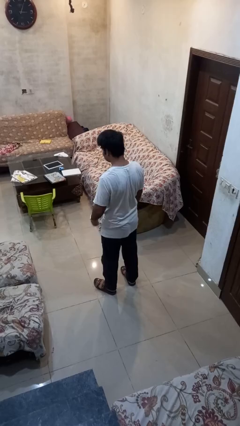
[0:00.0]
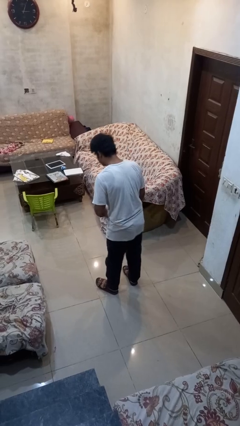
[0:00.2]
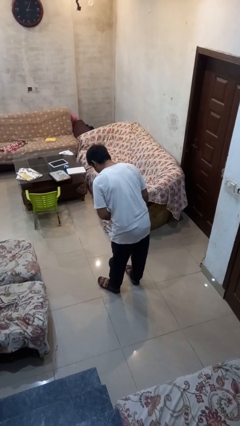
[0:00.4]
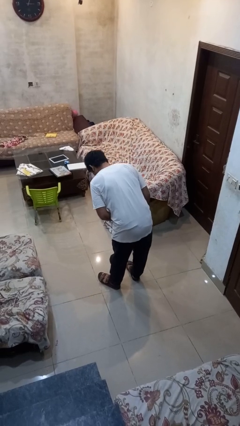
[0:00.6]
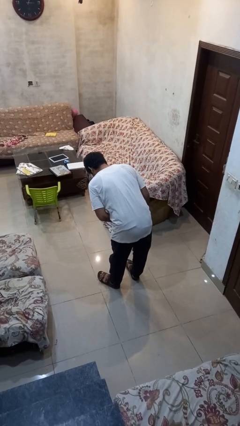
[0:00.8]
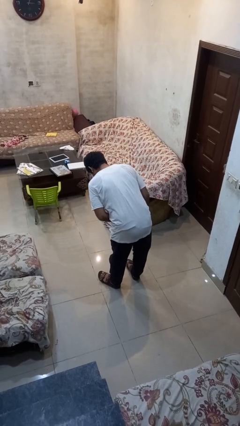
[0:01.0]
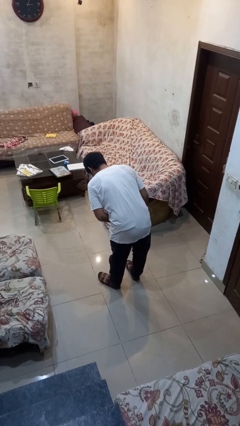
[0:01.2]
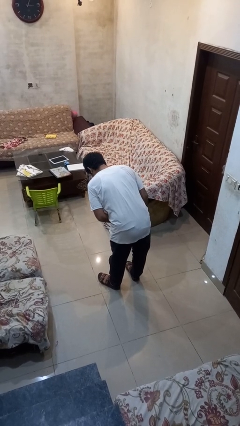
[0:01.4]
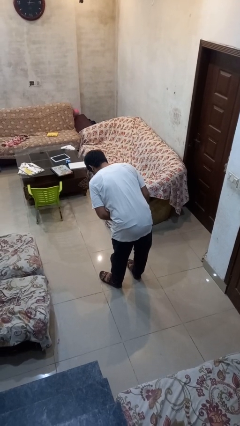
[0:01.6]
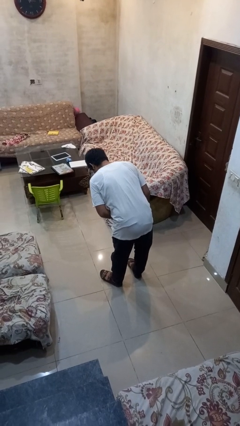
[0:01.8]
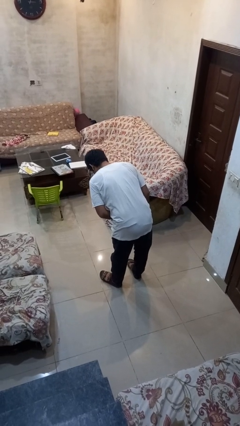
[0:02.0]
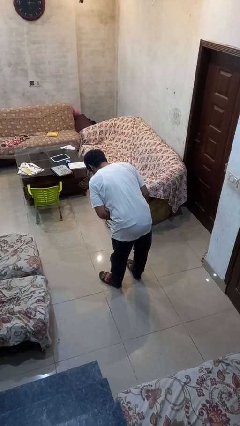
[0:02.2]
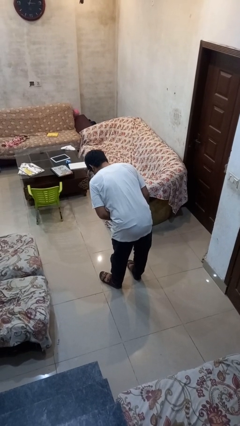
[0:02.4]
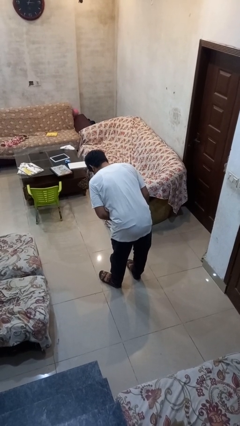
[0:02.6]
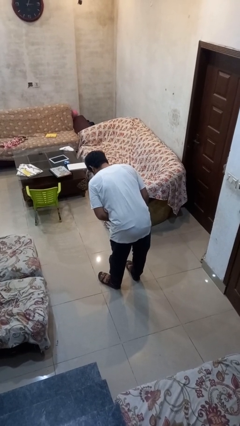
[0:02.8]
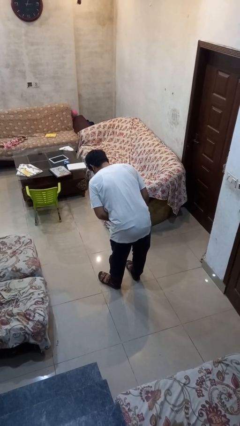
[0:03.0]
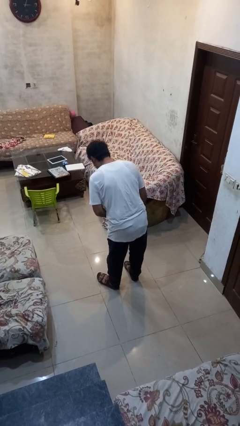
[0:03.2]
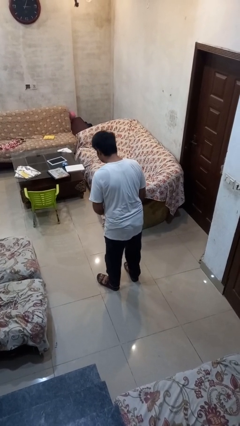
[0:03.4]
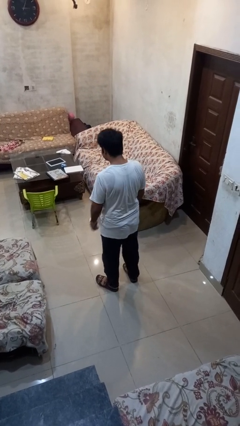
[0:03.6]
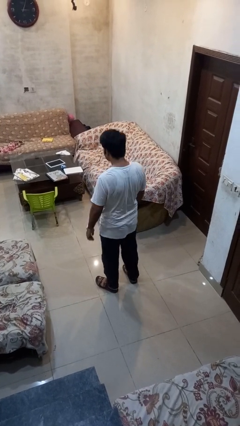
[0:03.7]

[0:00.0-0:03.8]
person bows

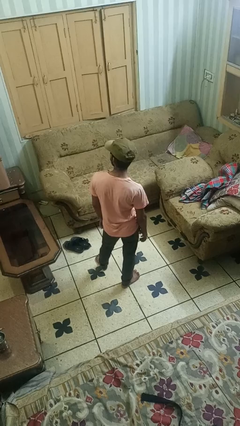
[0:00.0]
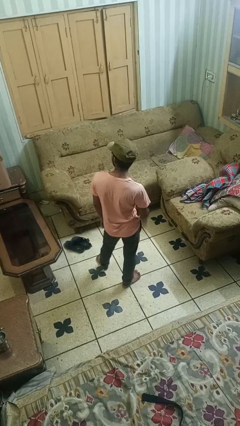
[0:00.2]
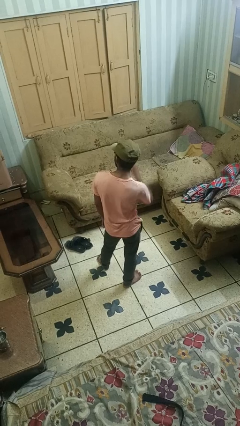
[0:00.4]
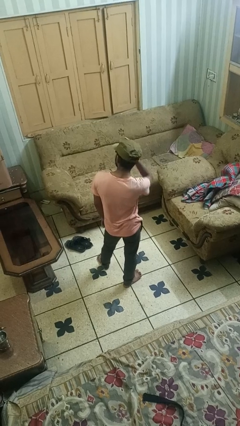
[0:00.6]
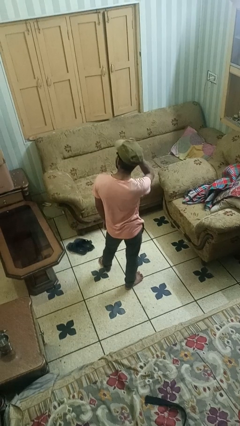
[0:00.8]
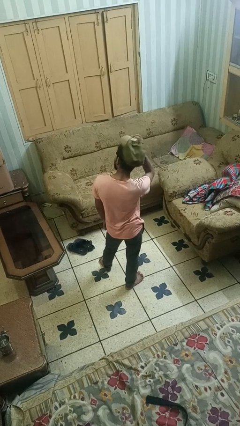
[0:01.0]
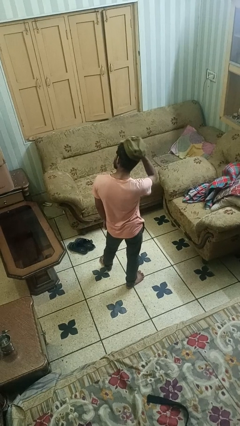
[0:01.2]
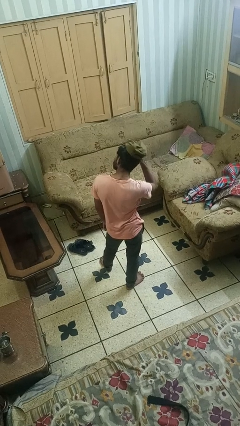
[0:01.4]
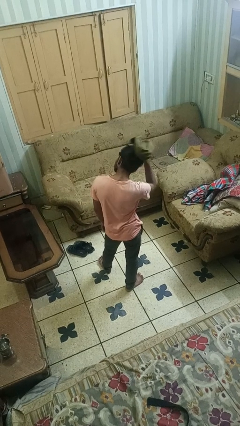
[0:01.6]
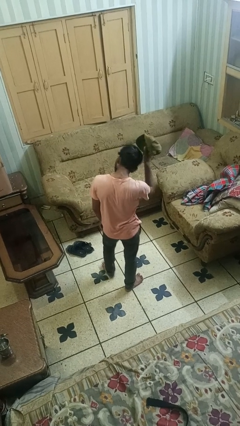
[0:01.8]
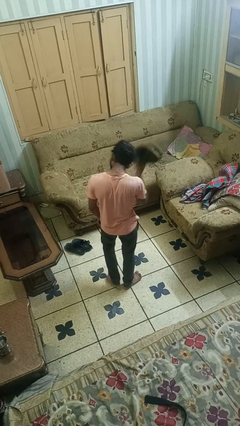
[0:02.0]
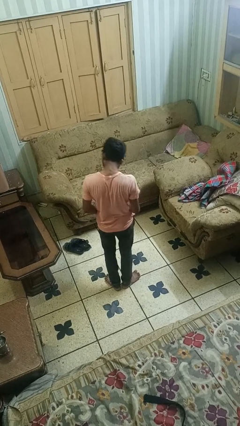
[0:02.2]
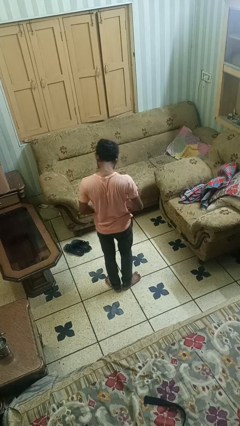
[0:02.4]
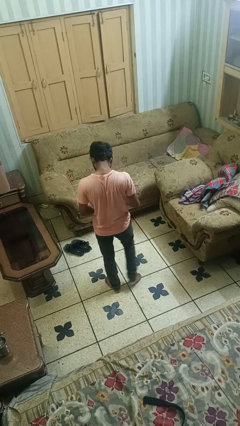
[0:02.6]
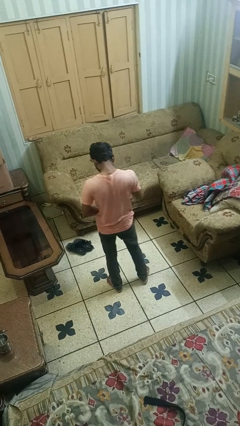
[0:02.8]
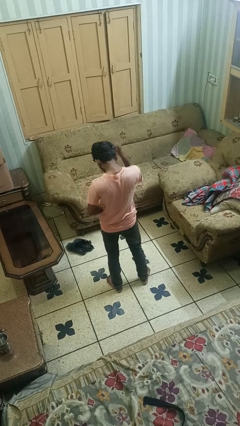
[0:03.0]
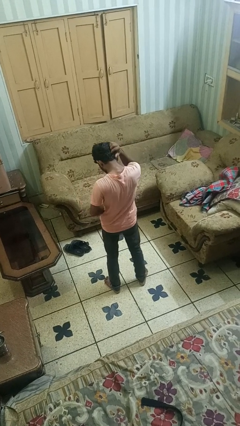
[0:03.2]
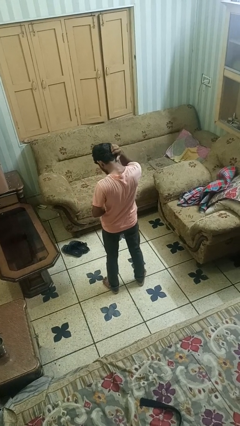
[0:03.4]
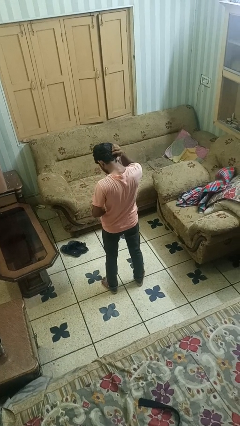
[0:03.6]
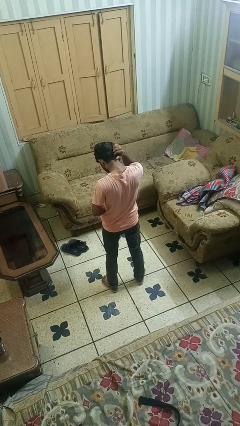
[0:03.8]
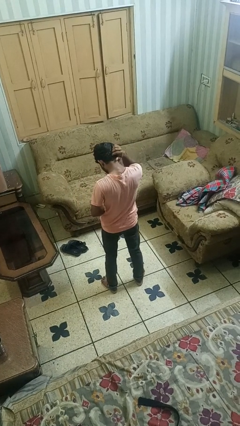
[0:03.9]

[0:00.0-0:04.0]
person takes off hat

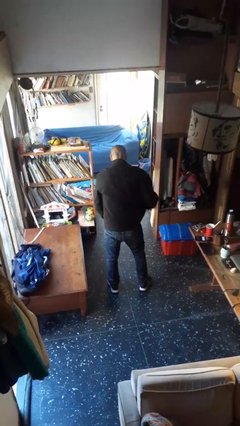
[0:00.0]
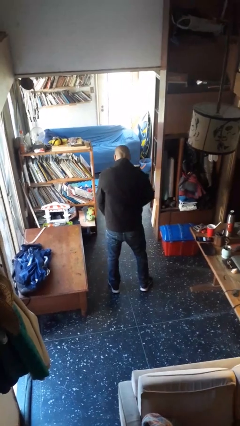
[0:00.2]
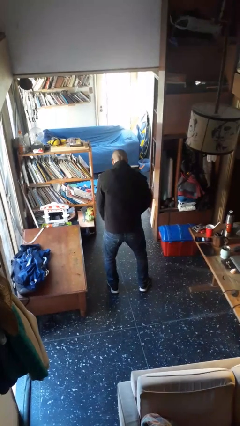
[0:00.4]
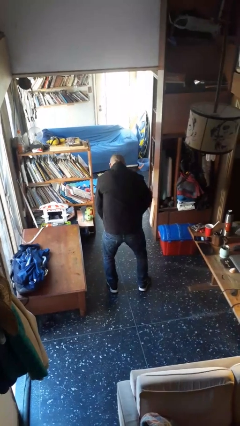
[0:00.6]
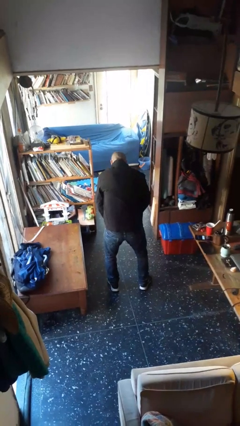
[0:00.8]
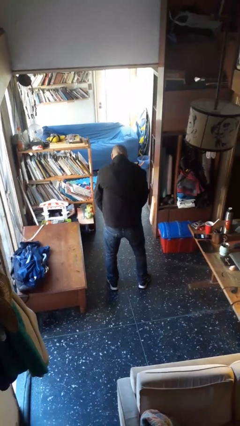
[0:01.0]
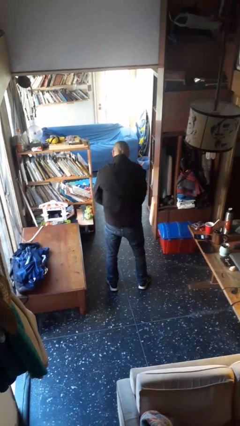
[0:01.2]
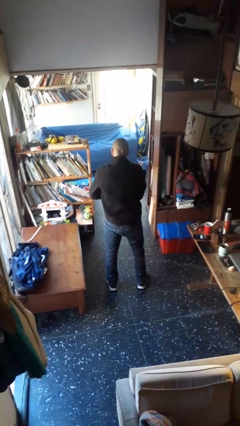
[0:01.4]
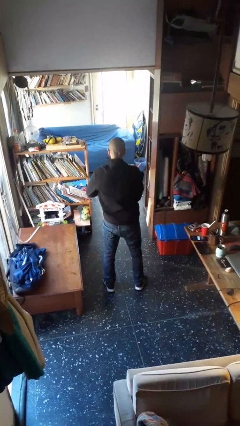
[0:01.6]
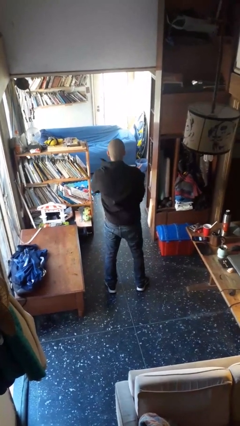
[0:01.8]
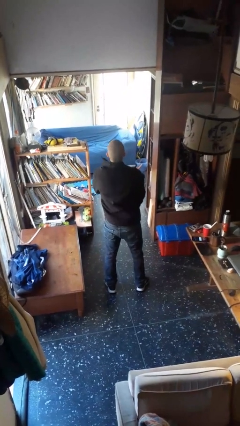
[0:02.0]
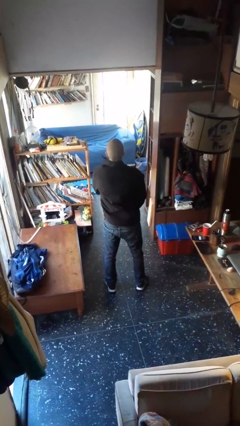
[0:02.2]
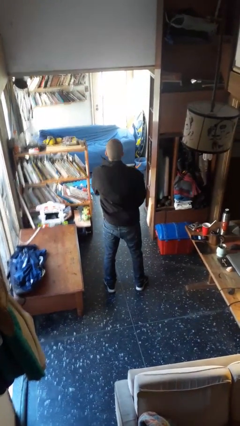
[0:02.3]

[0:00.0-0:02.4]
person zips up jacket

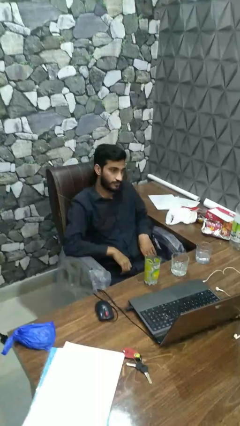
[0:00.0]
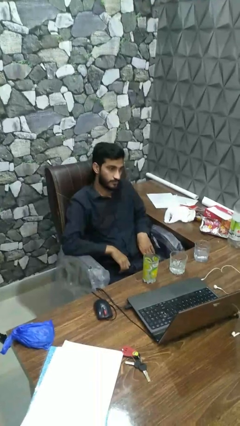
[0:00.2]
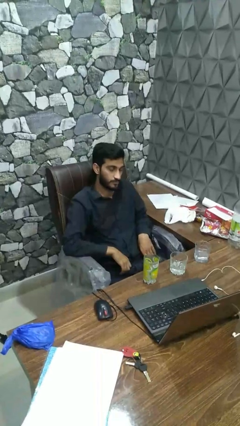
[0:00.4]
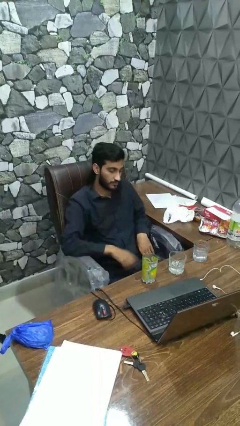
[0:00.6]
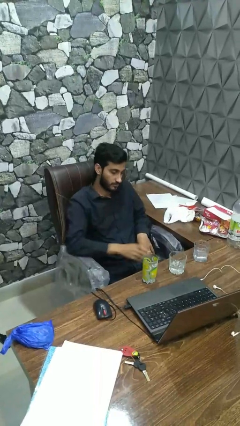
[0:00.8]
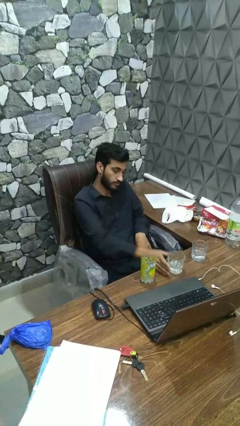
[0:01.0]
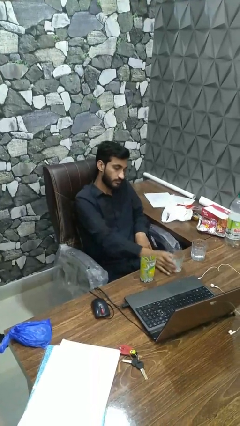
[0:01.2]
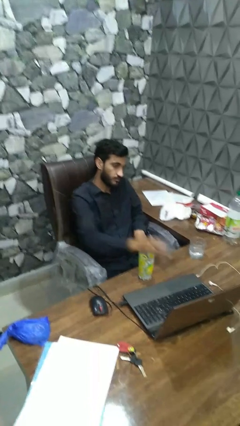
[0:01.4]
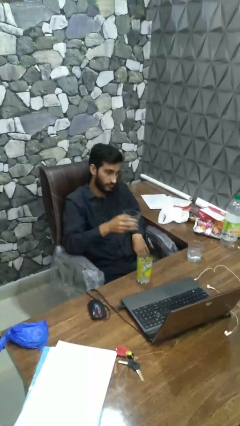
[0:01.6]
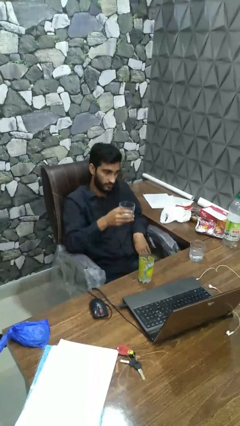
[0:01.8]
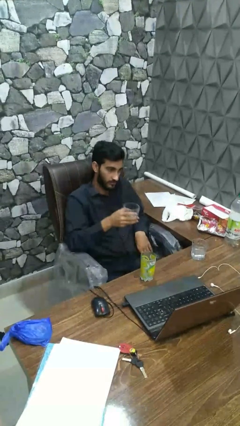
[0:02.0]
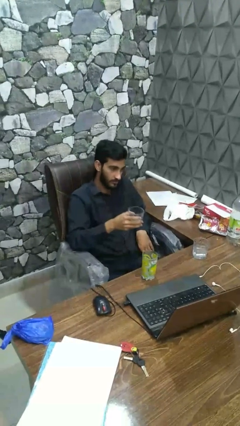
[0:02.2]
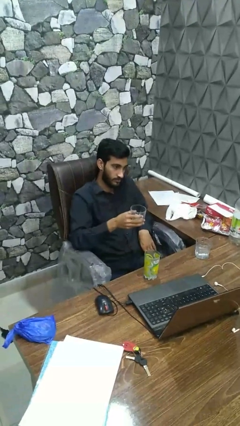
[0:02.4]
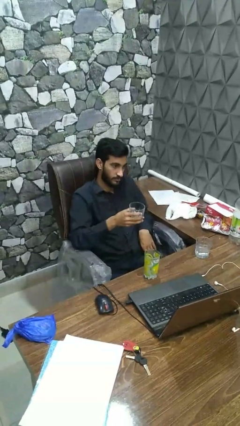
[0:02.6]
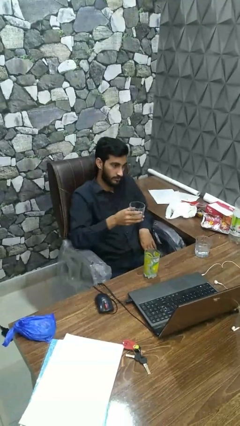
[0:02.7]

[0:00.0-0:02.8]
person picks up object from table

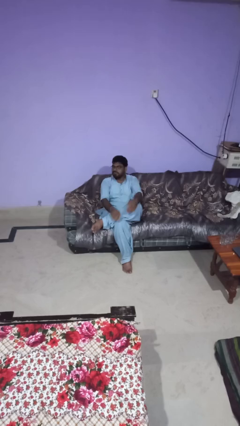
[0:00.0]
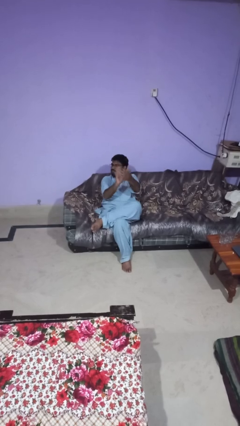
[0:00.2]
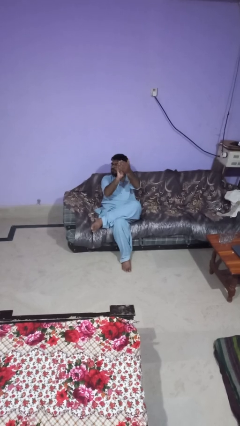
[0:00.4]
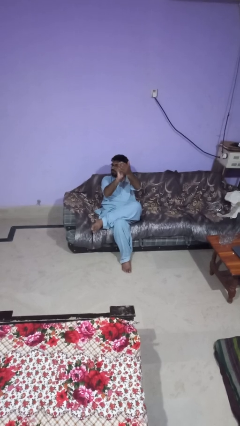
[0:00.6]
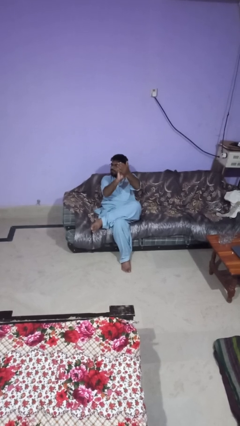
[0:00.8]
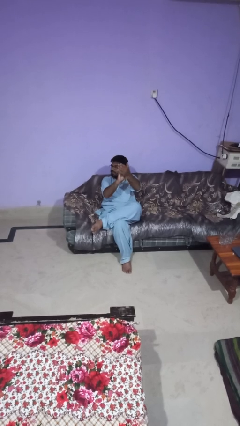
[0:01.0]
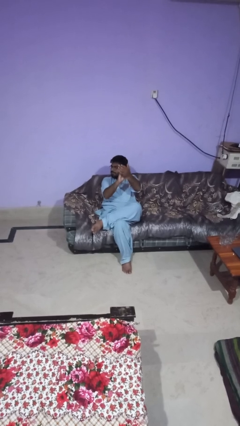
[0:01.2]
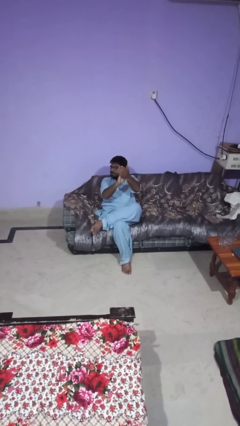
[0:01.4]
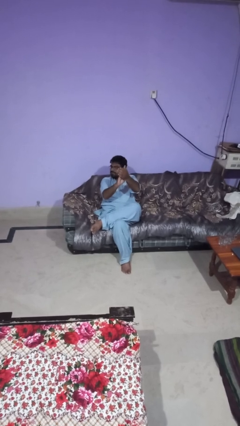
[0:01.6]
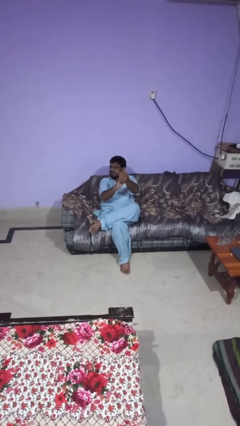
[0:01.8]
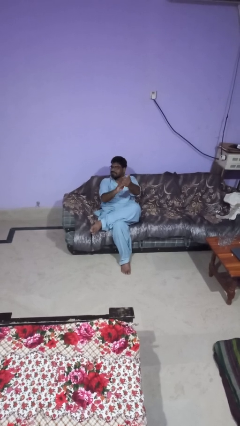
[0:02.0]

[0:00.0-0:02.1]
person claps hands

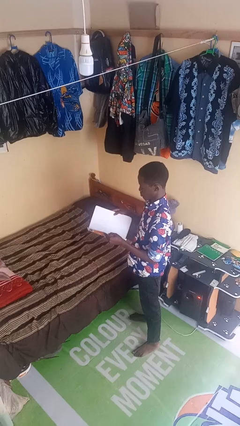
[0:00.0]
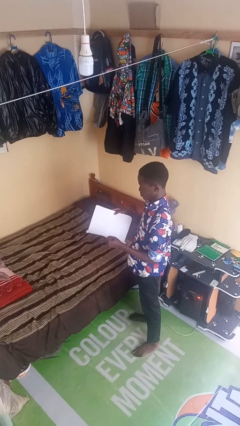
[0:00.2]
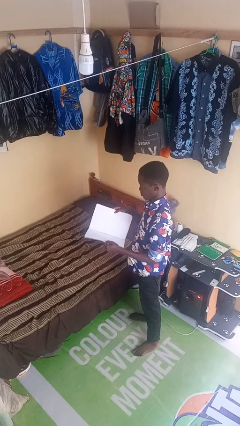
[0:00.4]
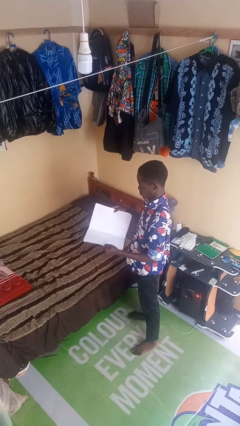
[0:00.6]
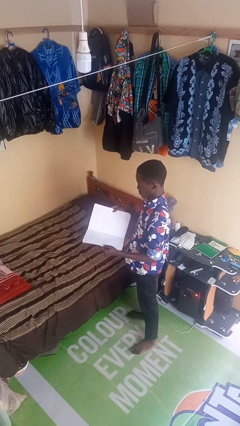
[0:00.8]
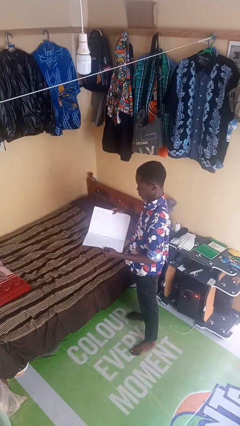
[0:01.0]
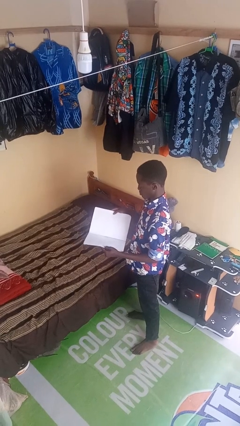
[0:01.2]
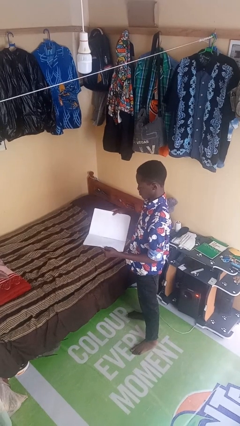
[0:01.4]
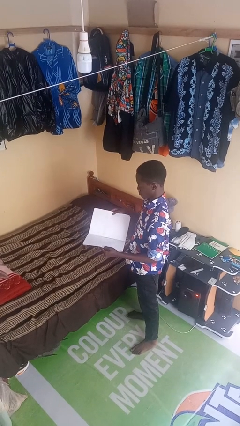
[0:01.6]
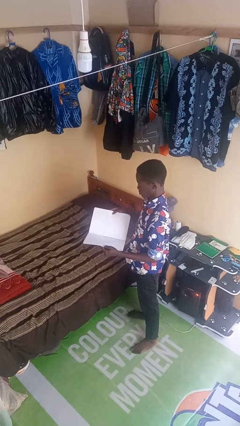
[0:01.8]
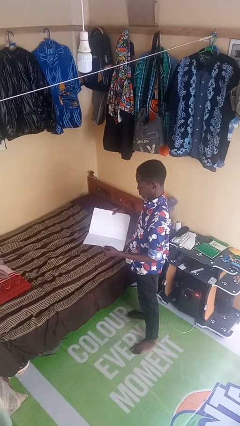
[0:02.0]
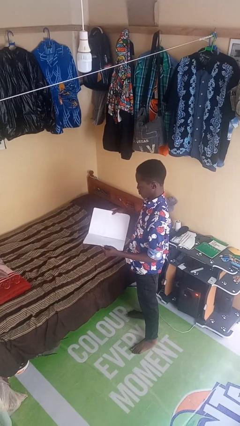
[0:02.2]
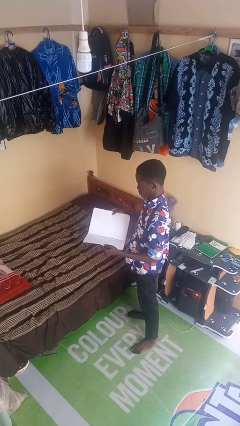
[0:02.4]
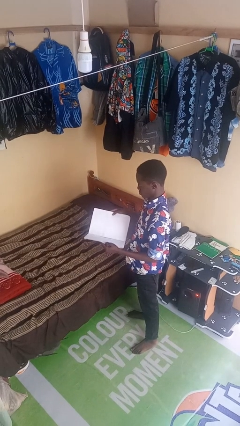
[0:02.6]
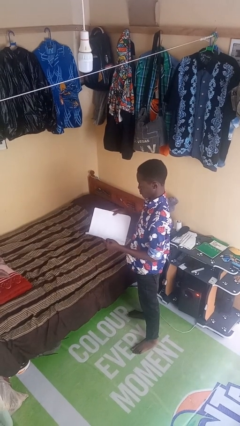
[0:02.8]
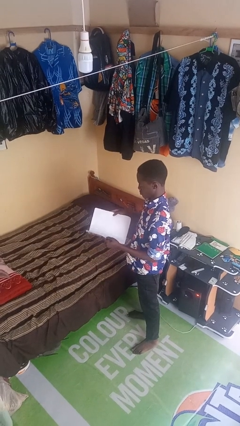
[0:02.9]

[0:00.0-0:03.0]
person reads book
